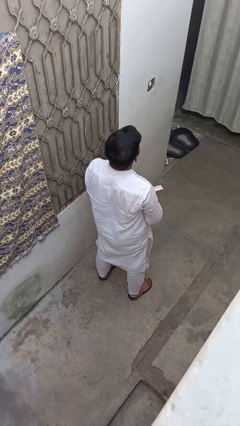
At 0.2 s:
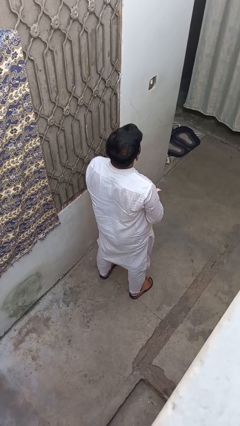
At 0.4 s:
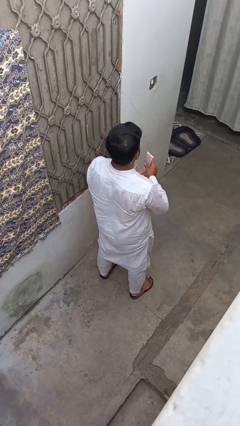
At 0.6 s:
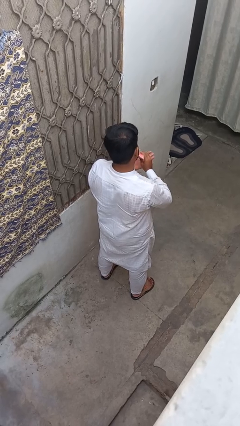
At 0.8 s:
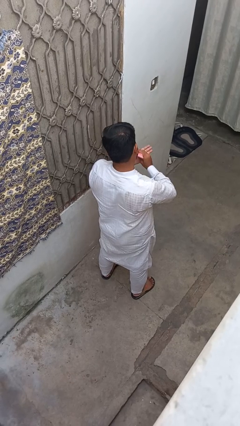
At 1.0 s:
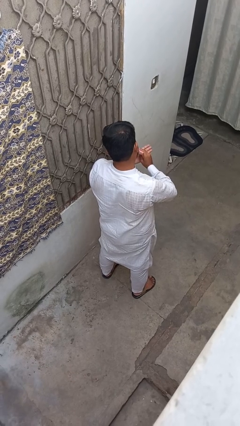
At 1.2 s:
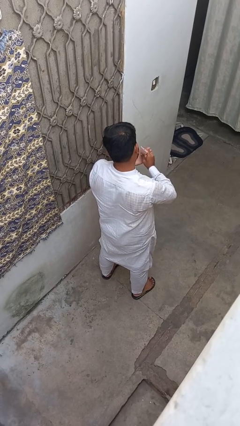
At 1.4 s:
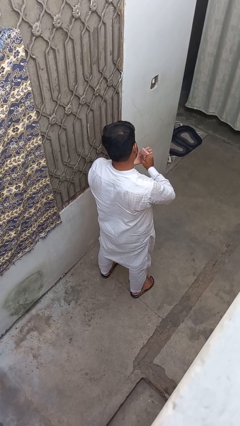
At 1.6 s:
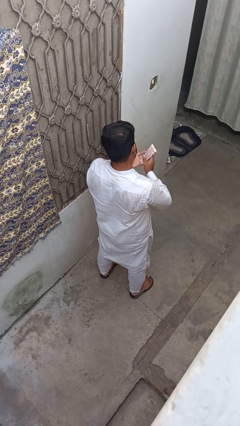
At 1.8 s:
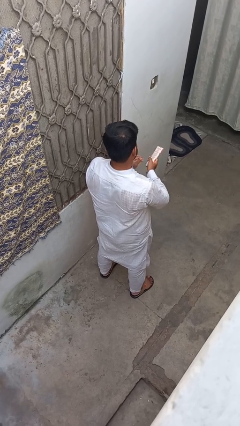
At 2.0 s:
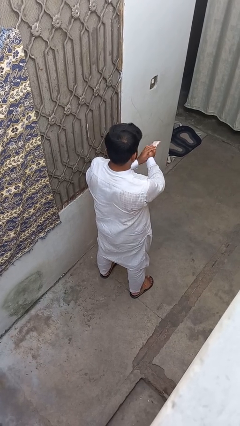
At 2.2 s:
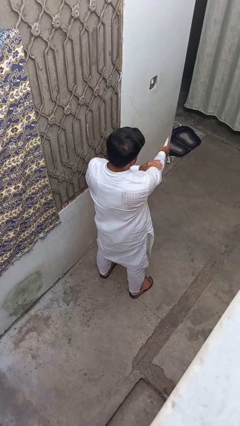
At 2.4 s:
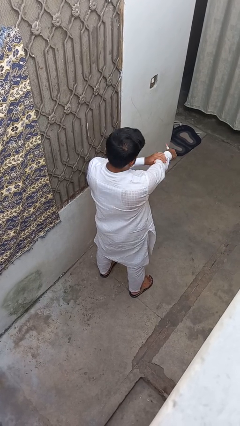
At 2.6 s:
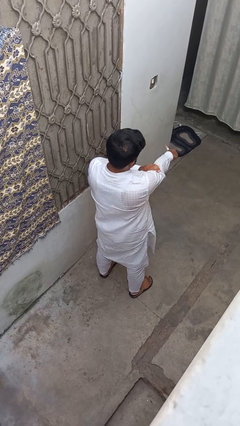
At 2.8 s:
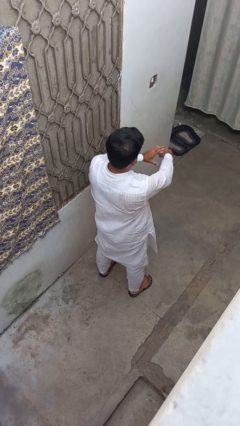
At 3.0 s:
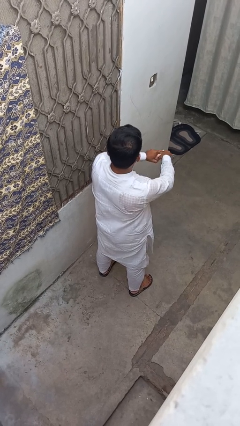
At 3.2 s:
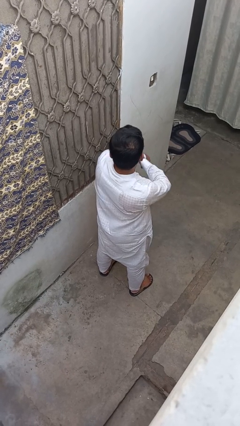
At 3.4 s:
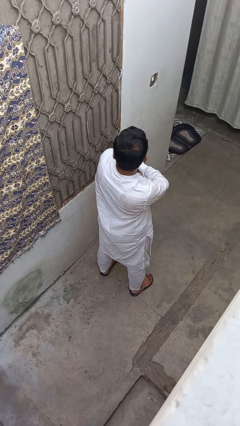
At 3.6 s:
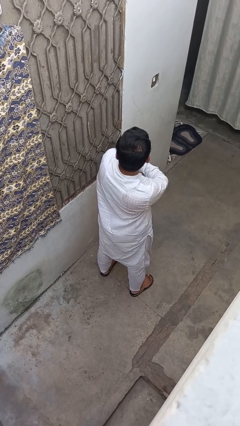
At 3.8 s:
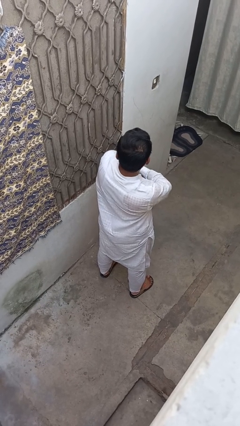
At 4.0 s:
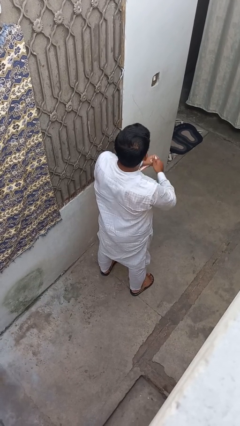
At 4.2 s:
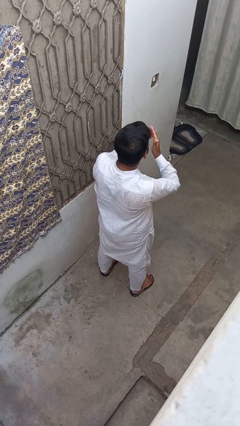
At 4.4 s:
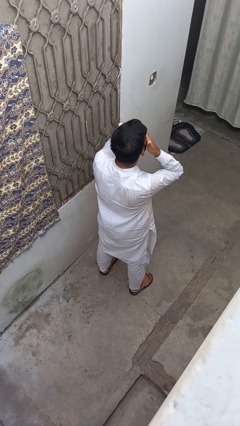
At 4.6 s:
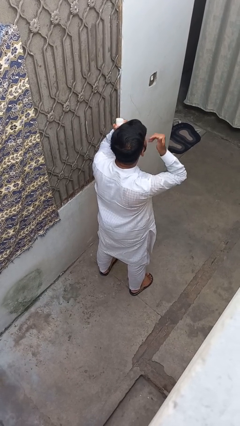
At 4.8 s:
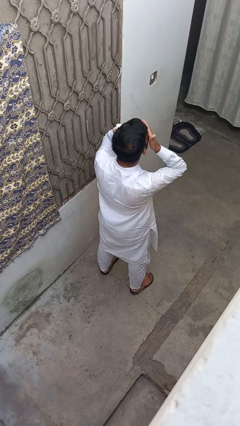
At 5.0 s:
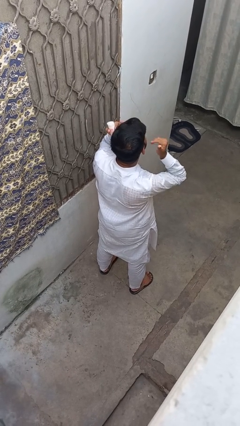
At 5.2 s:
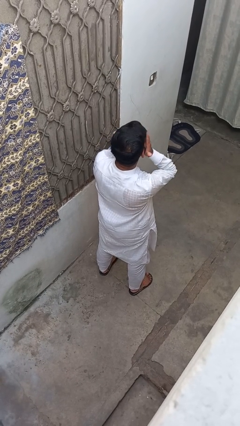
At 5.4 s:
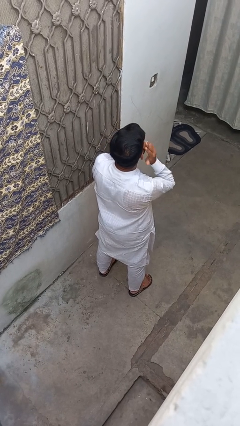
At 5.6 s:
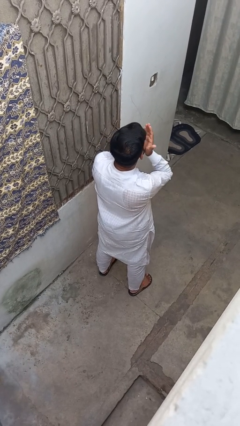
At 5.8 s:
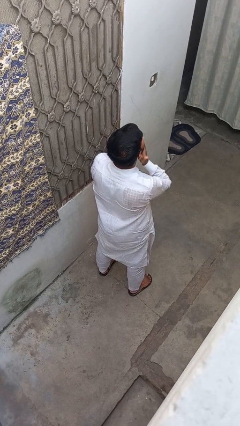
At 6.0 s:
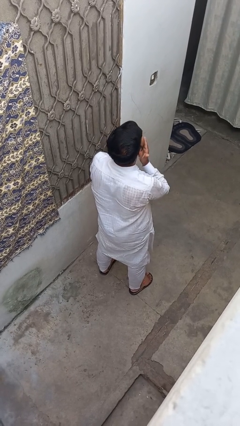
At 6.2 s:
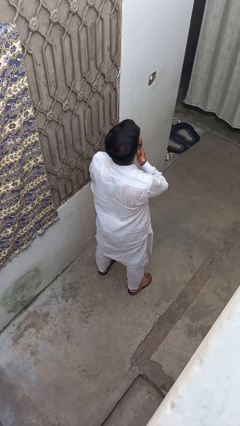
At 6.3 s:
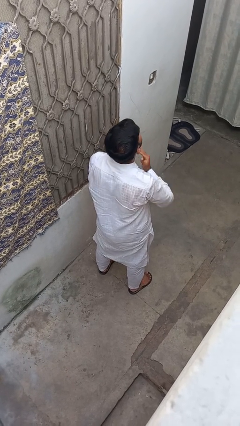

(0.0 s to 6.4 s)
person applies sunscreen

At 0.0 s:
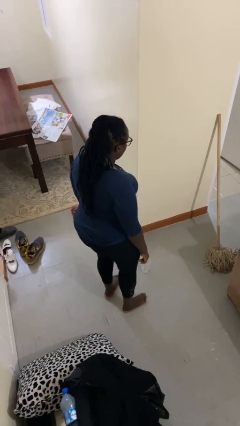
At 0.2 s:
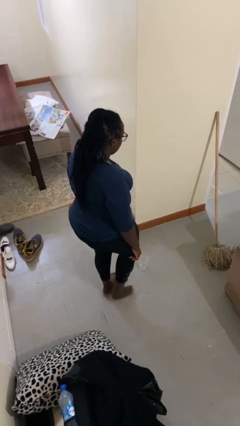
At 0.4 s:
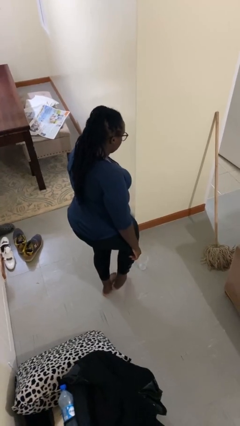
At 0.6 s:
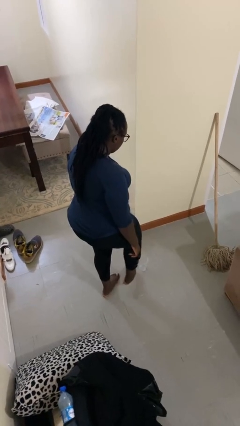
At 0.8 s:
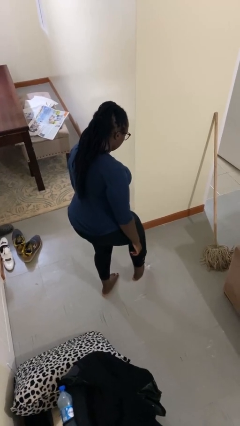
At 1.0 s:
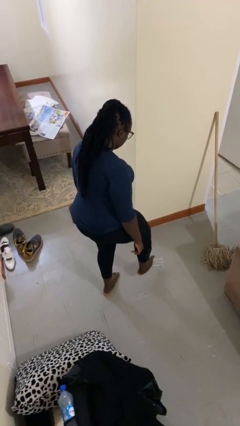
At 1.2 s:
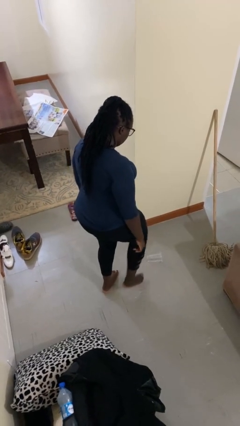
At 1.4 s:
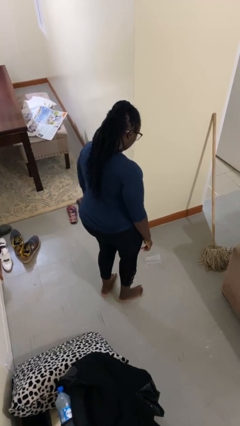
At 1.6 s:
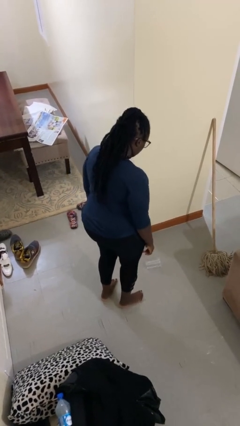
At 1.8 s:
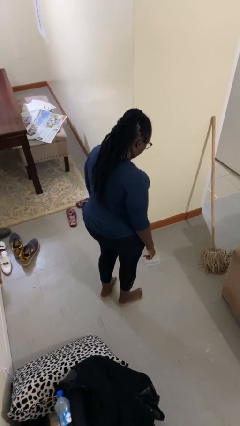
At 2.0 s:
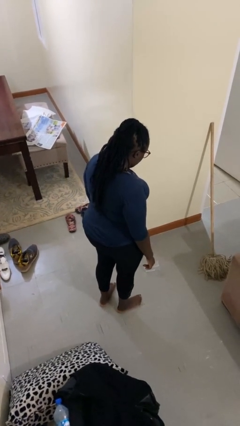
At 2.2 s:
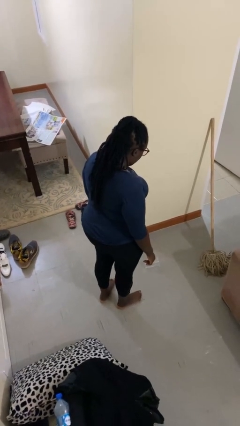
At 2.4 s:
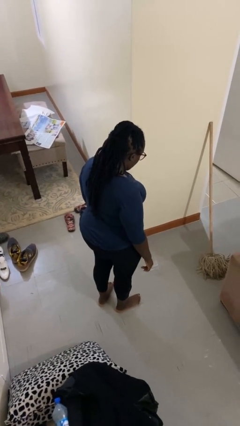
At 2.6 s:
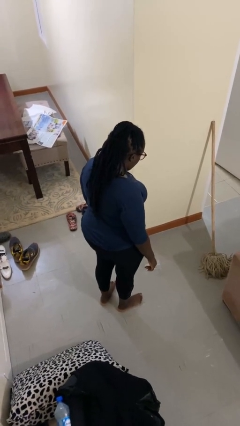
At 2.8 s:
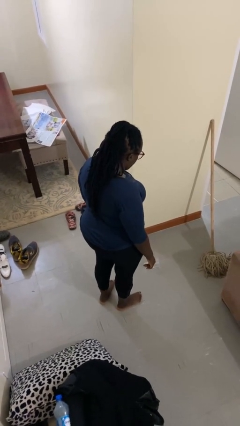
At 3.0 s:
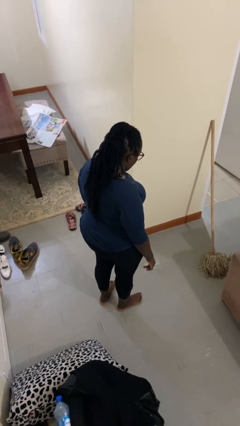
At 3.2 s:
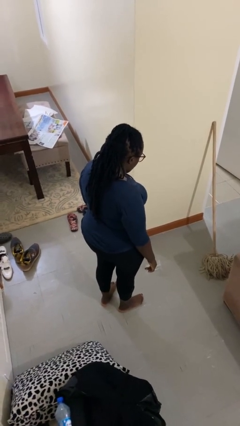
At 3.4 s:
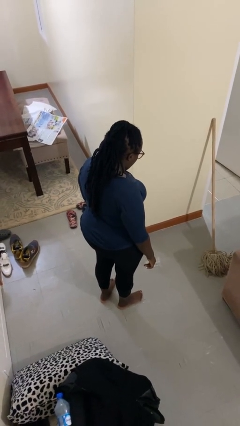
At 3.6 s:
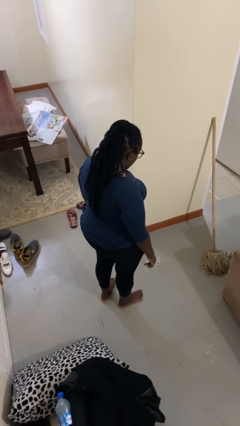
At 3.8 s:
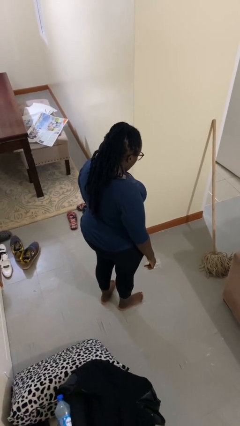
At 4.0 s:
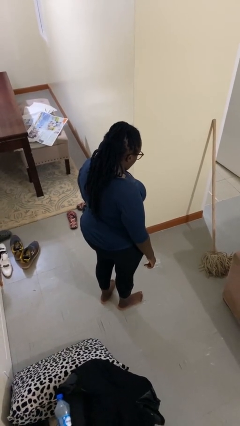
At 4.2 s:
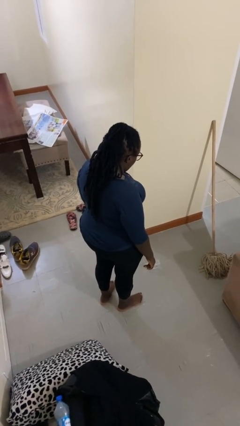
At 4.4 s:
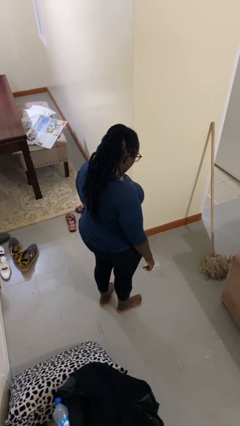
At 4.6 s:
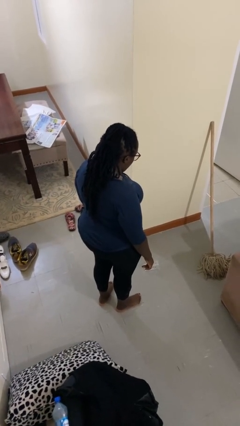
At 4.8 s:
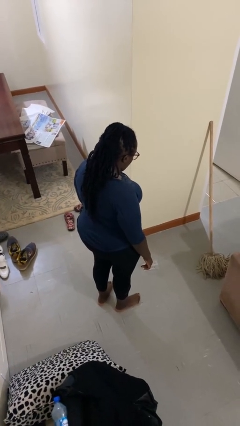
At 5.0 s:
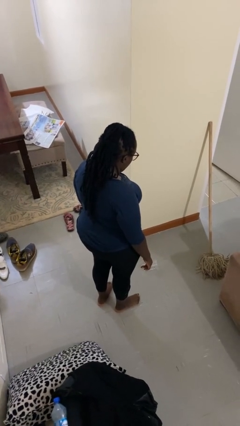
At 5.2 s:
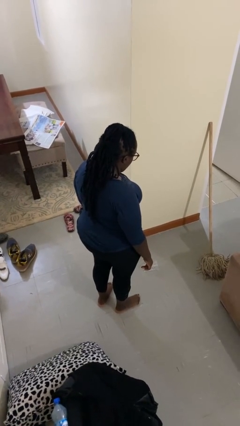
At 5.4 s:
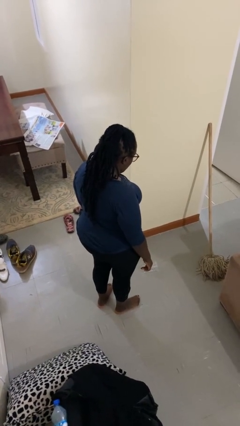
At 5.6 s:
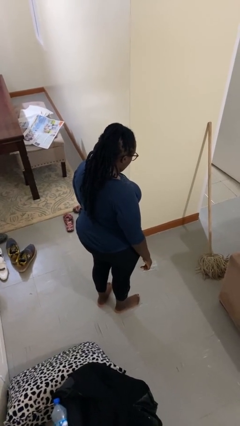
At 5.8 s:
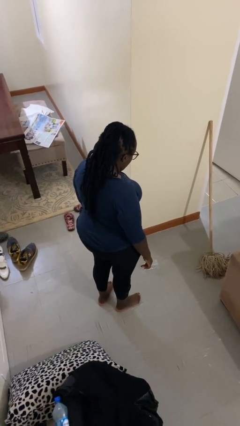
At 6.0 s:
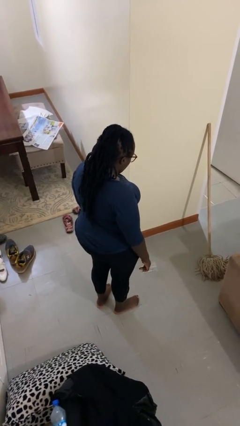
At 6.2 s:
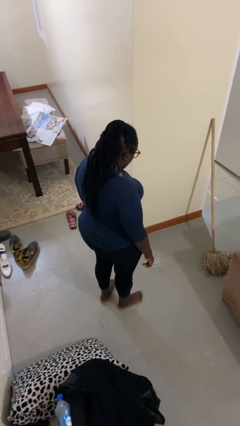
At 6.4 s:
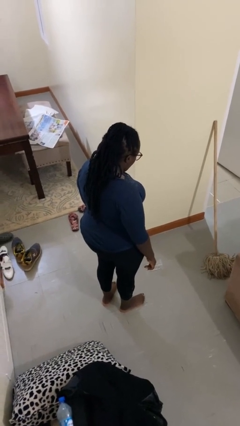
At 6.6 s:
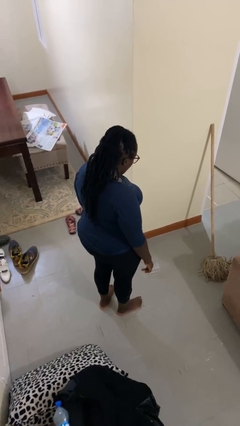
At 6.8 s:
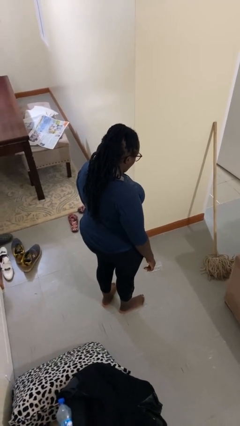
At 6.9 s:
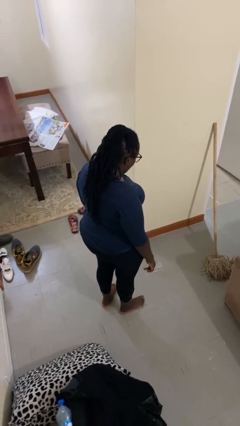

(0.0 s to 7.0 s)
person spills on floor

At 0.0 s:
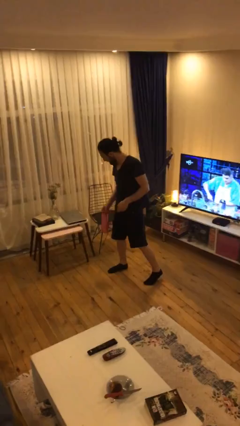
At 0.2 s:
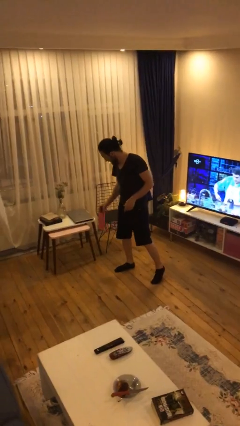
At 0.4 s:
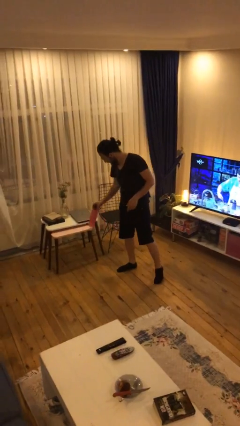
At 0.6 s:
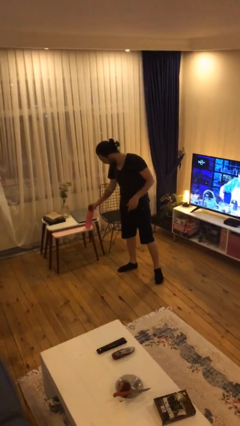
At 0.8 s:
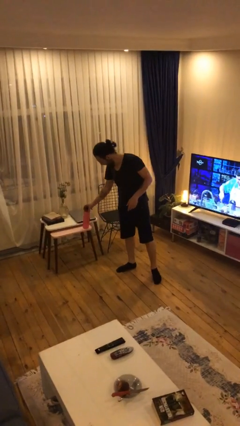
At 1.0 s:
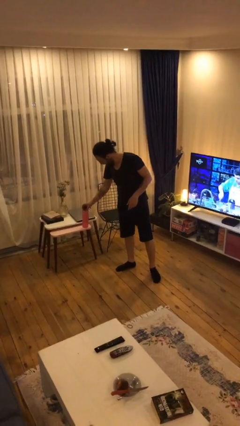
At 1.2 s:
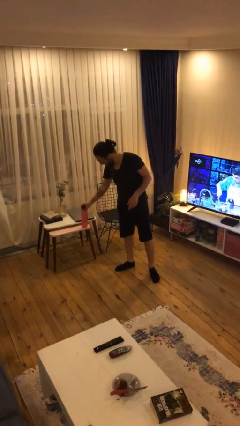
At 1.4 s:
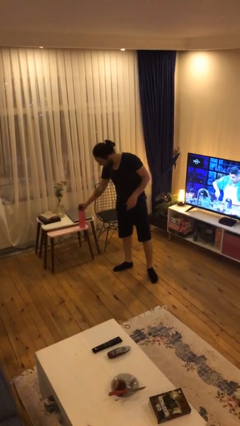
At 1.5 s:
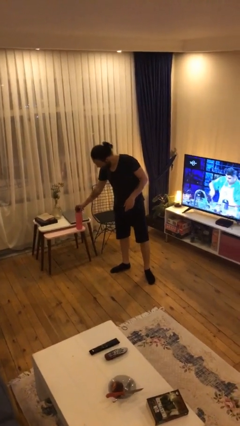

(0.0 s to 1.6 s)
person puts down object on table

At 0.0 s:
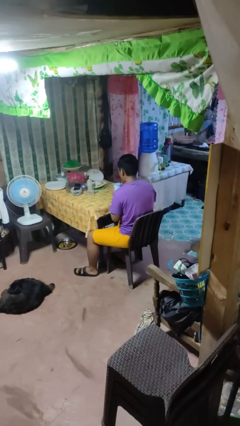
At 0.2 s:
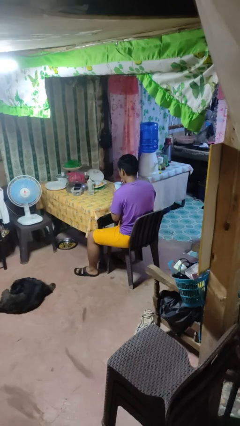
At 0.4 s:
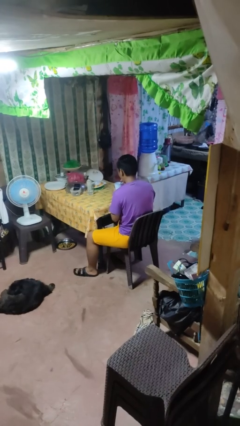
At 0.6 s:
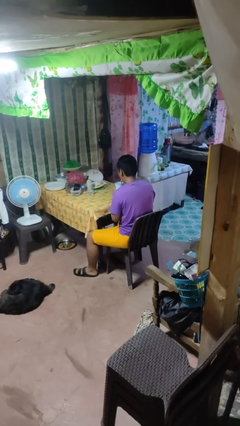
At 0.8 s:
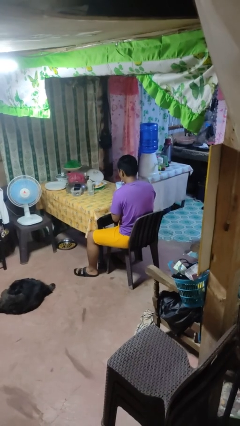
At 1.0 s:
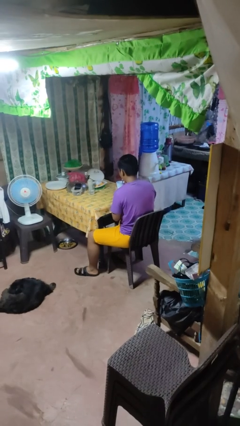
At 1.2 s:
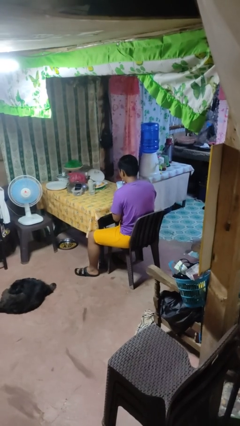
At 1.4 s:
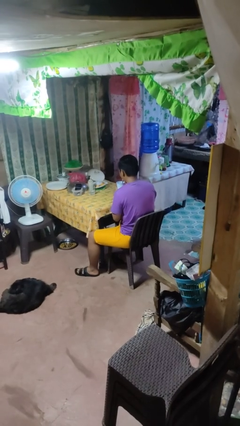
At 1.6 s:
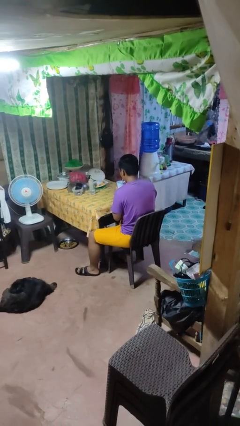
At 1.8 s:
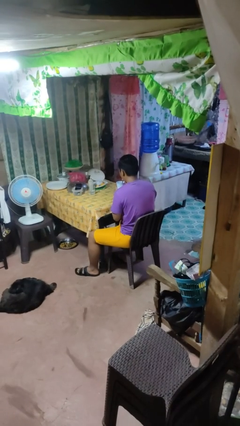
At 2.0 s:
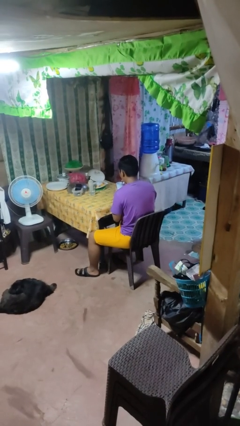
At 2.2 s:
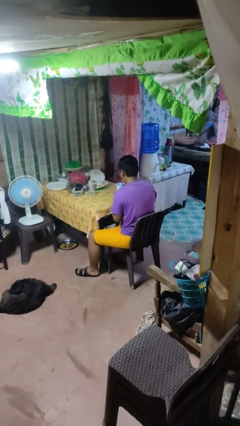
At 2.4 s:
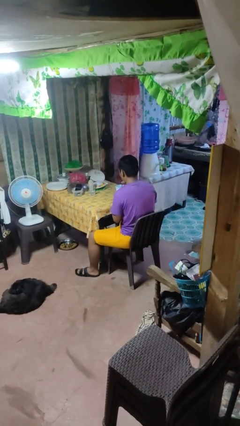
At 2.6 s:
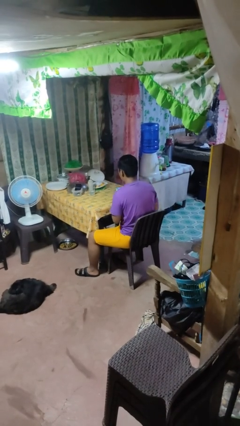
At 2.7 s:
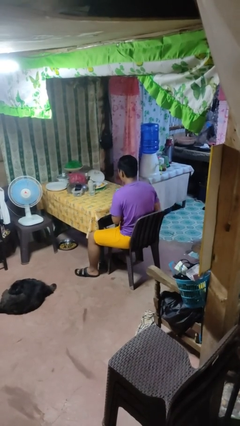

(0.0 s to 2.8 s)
person drinks from straw
